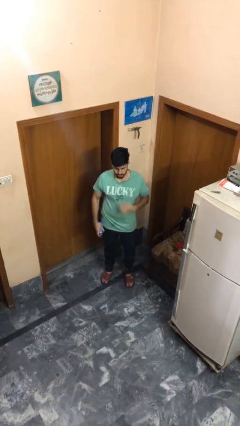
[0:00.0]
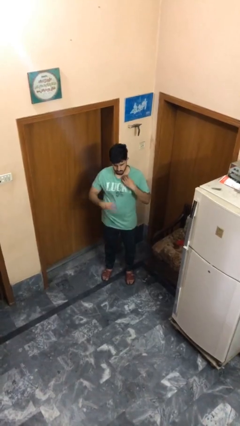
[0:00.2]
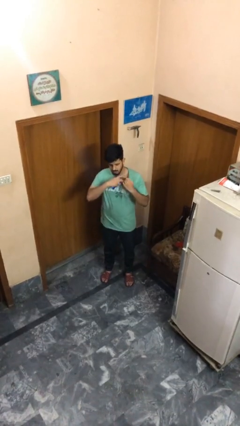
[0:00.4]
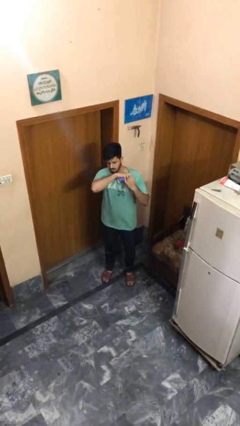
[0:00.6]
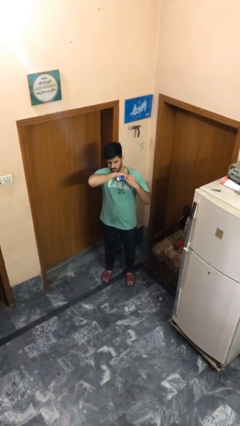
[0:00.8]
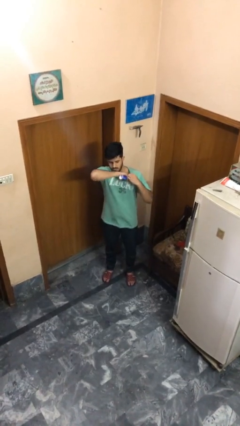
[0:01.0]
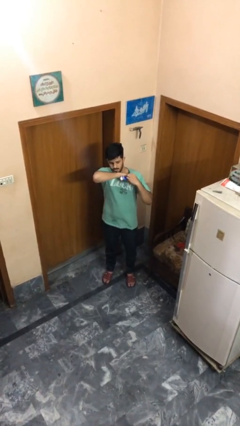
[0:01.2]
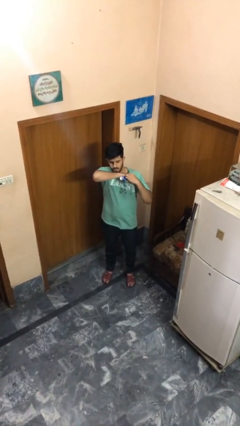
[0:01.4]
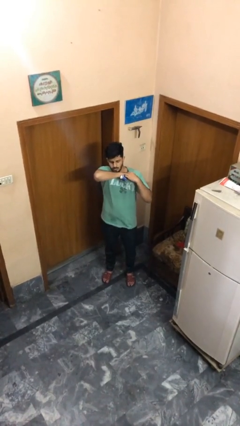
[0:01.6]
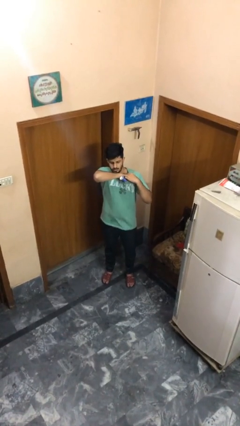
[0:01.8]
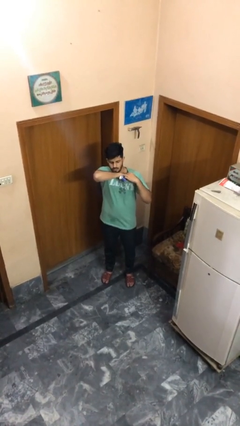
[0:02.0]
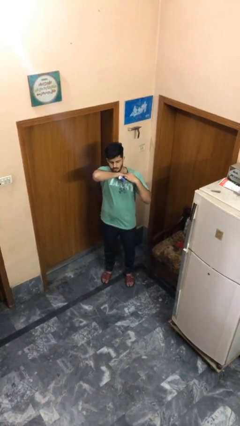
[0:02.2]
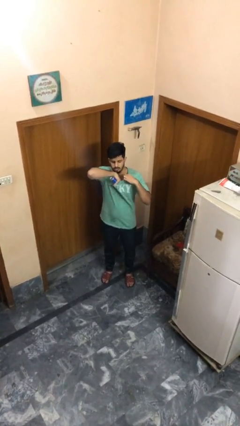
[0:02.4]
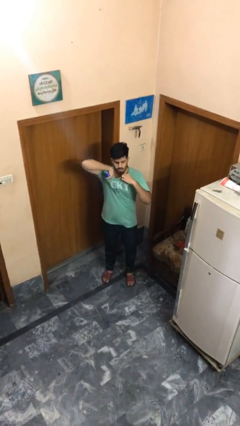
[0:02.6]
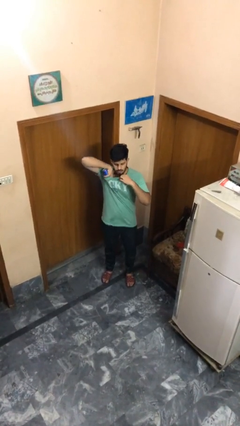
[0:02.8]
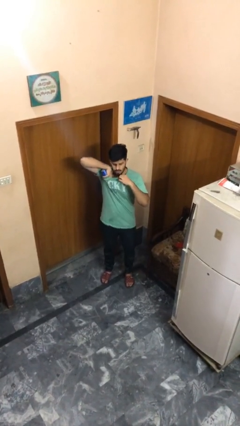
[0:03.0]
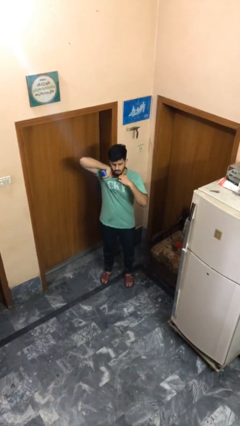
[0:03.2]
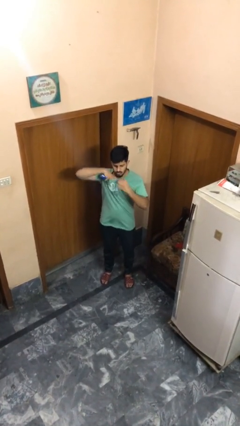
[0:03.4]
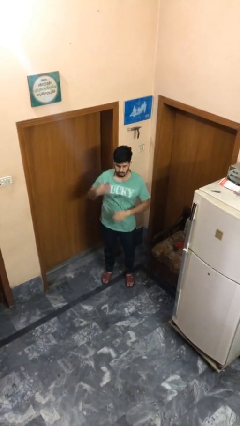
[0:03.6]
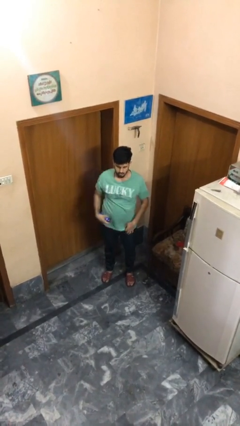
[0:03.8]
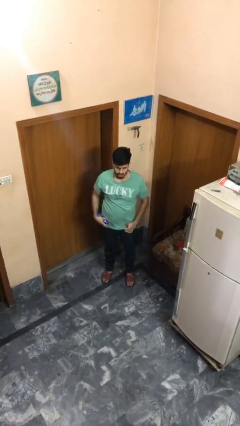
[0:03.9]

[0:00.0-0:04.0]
person applies deodorant

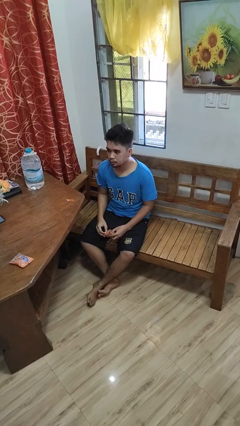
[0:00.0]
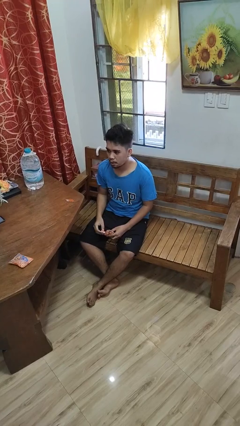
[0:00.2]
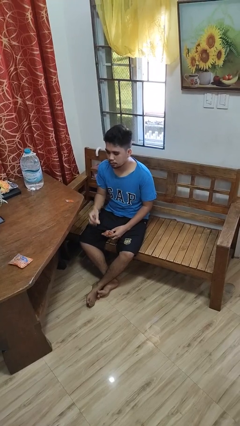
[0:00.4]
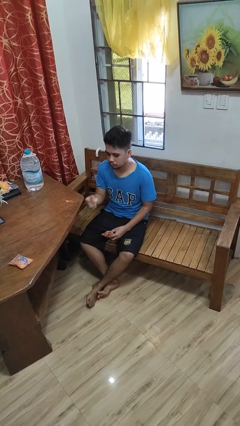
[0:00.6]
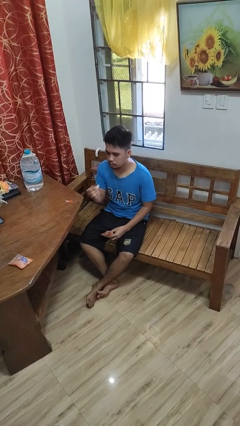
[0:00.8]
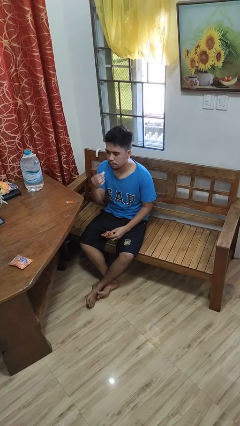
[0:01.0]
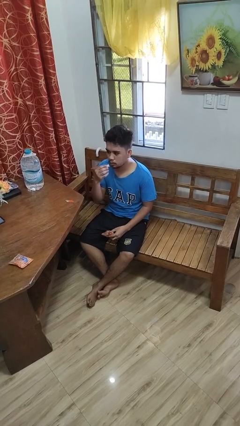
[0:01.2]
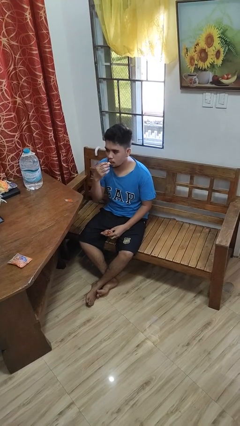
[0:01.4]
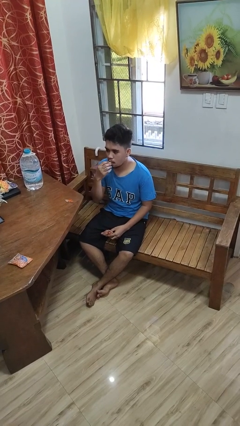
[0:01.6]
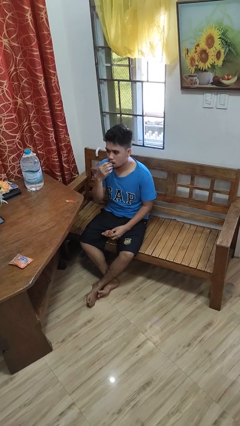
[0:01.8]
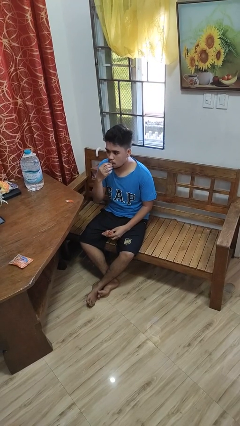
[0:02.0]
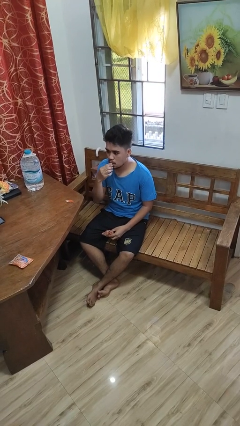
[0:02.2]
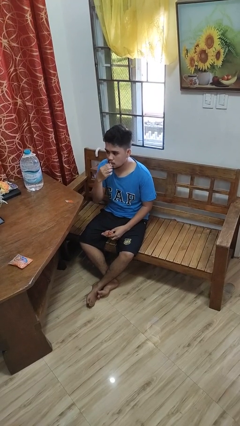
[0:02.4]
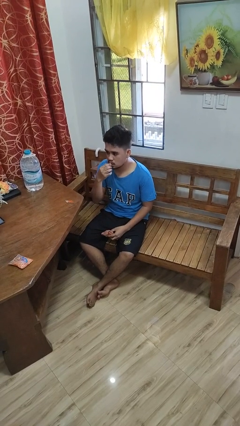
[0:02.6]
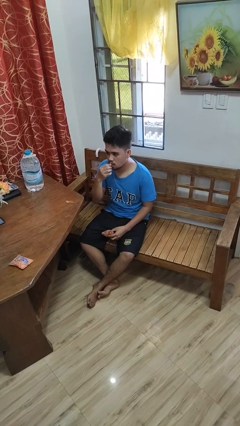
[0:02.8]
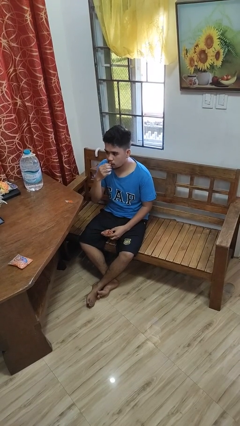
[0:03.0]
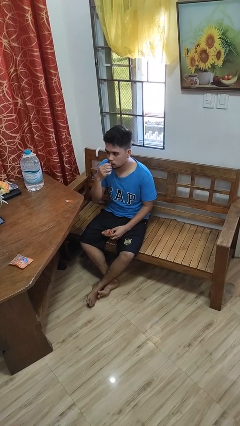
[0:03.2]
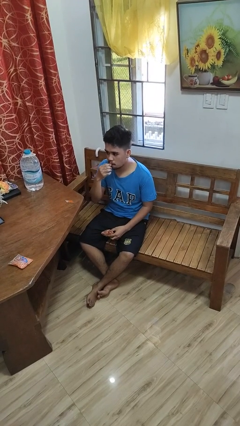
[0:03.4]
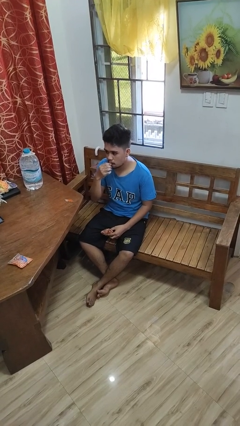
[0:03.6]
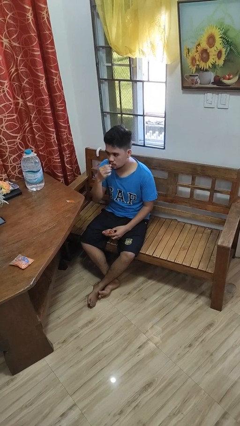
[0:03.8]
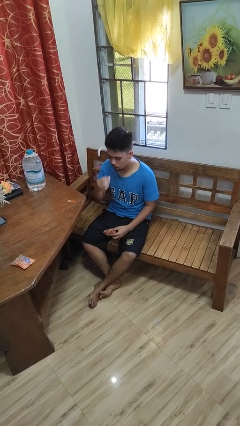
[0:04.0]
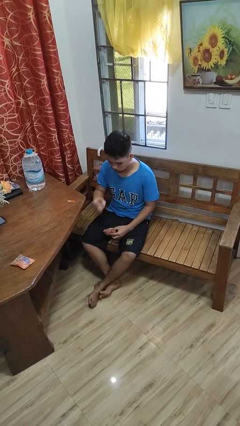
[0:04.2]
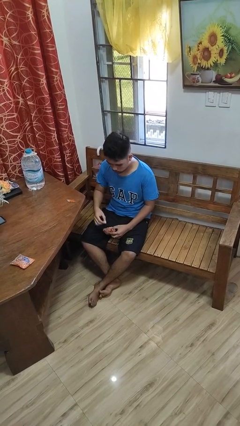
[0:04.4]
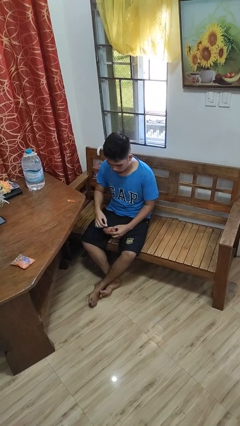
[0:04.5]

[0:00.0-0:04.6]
person eats snack from bag

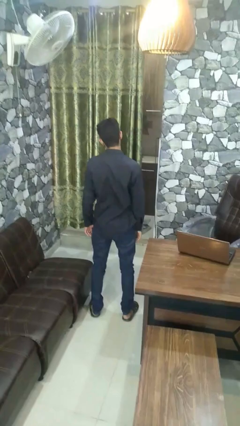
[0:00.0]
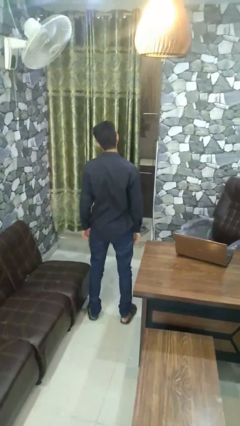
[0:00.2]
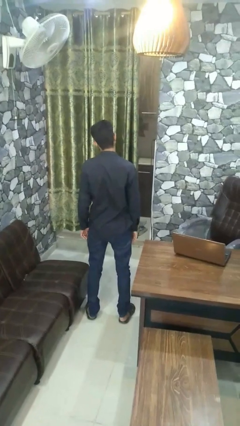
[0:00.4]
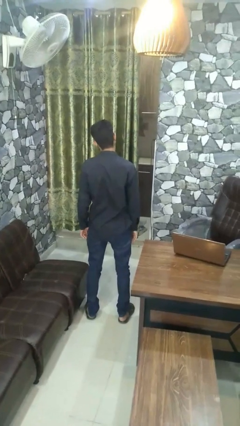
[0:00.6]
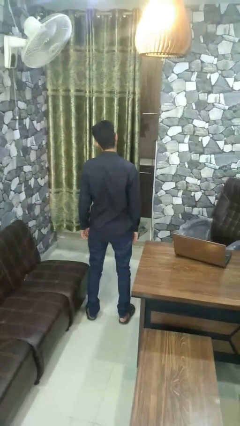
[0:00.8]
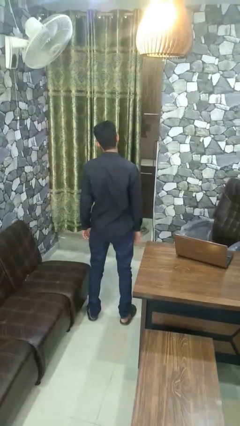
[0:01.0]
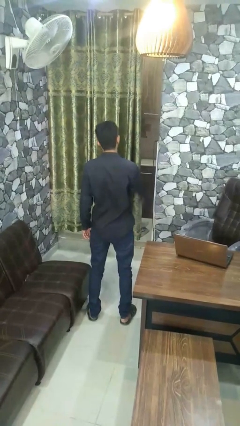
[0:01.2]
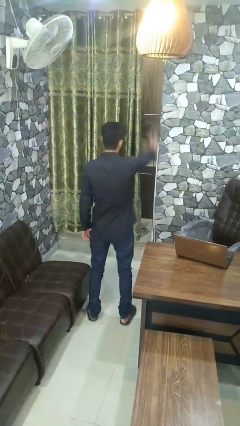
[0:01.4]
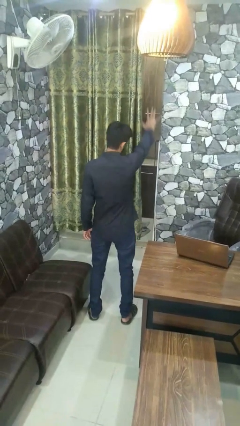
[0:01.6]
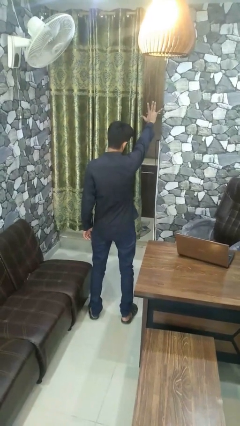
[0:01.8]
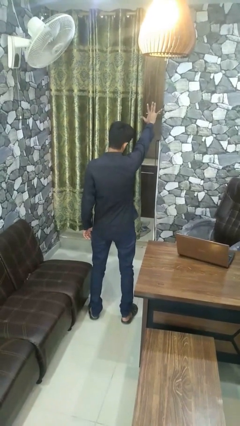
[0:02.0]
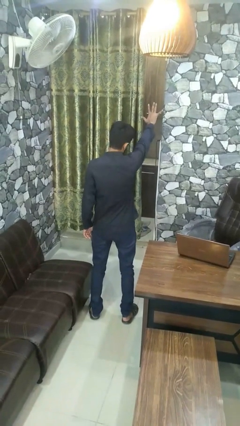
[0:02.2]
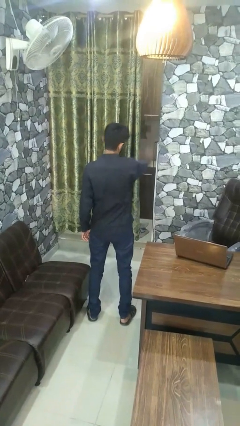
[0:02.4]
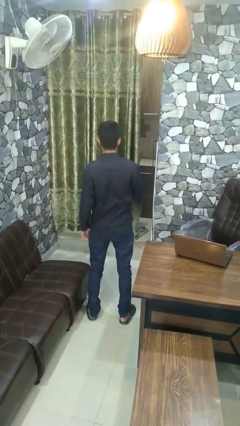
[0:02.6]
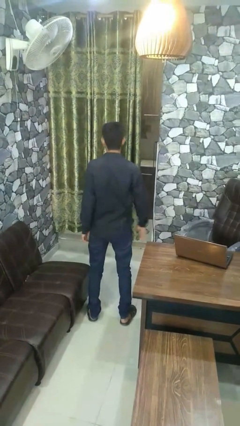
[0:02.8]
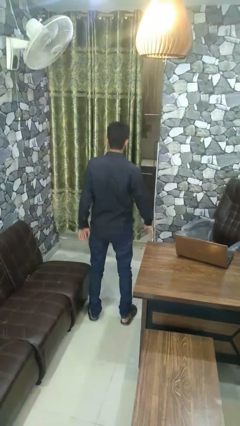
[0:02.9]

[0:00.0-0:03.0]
person gestures number five

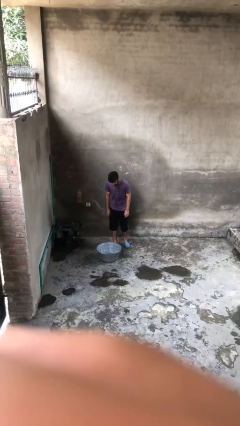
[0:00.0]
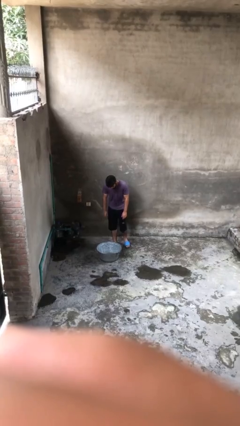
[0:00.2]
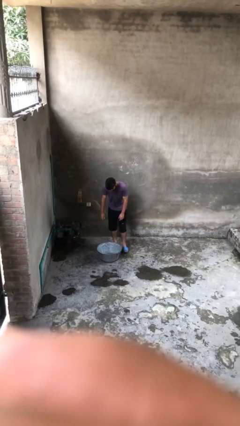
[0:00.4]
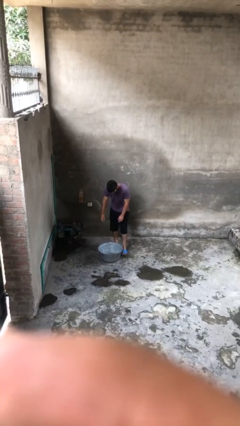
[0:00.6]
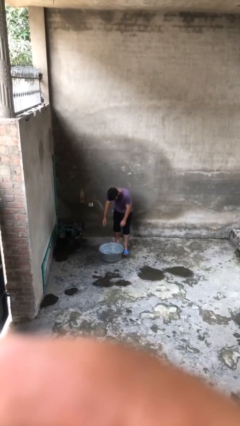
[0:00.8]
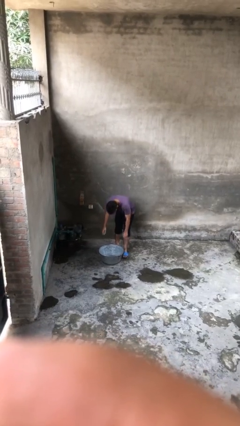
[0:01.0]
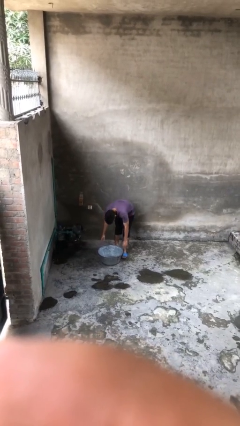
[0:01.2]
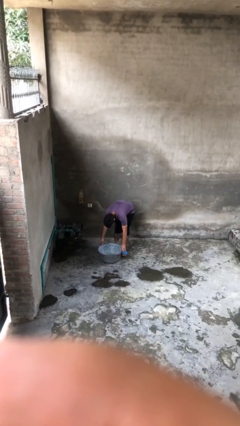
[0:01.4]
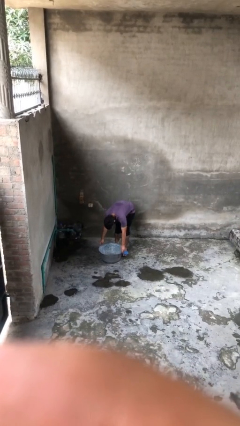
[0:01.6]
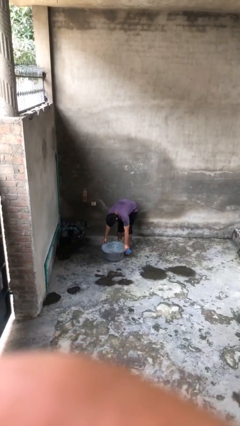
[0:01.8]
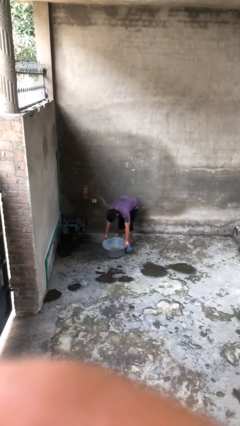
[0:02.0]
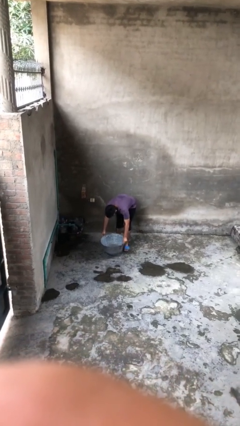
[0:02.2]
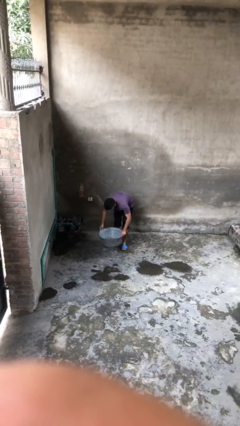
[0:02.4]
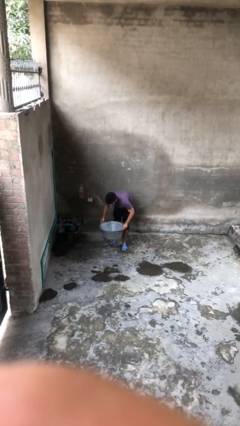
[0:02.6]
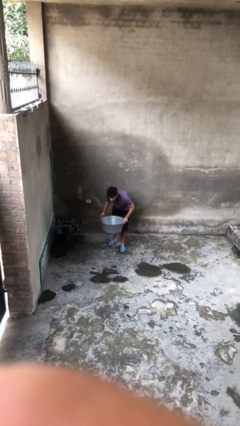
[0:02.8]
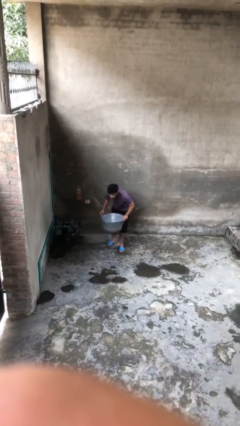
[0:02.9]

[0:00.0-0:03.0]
person picks up object from floor

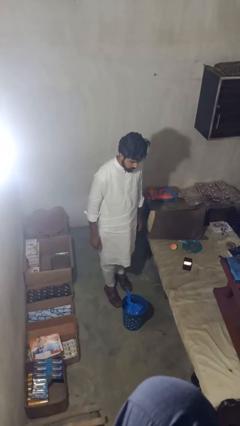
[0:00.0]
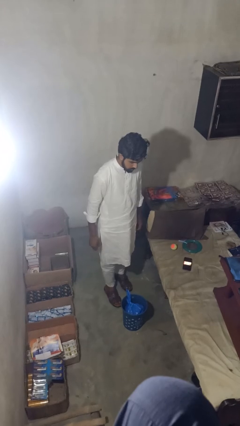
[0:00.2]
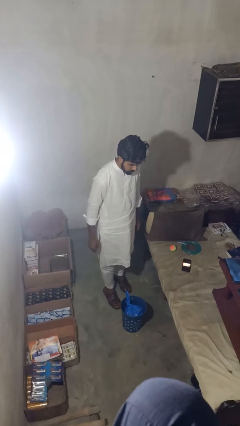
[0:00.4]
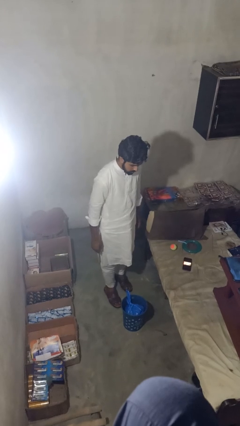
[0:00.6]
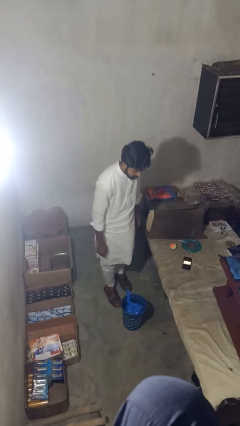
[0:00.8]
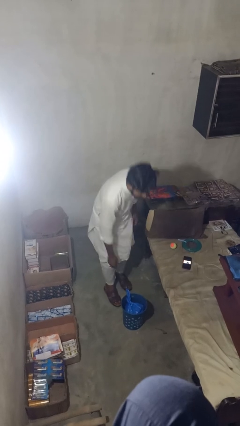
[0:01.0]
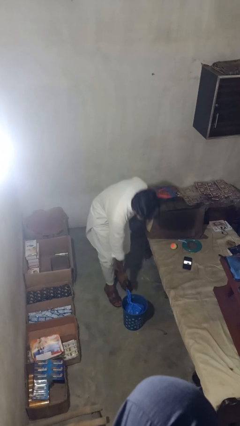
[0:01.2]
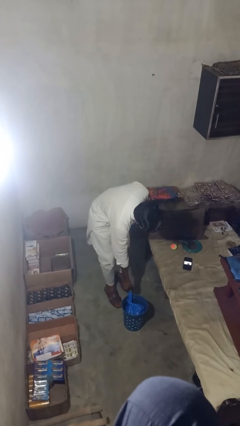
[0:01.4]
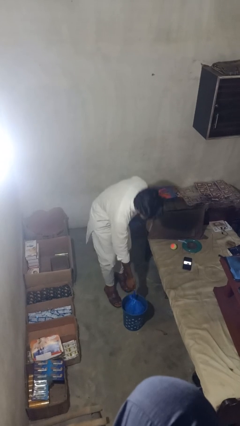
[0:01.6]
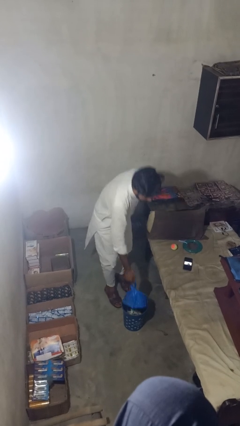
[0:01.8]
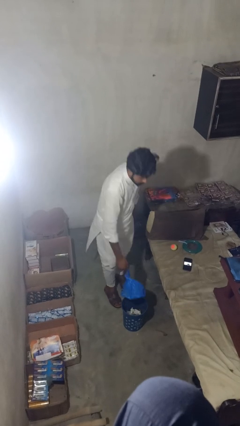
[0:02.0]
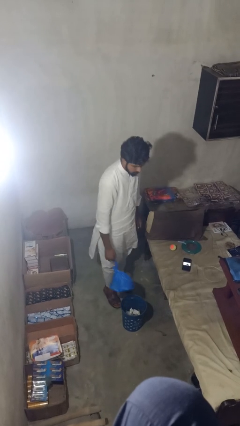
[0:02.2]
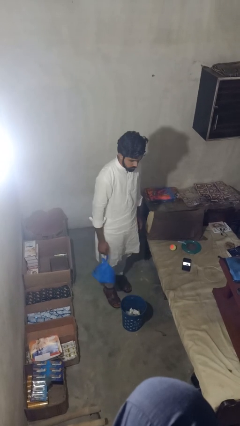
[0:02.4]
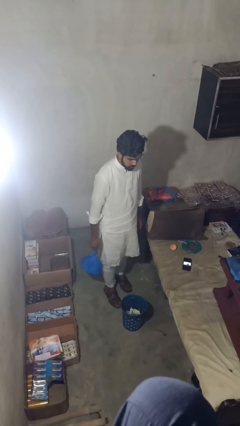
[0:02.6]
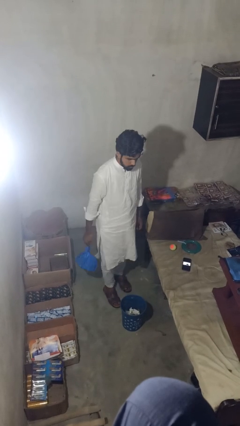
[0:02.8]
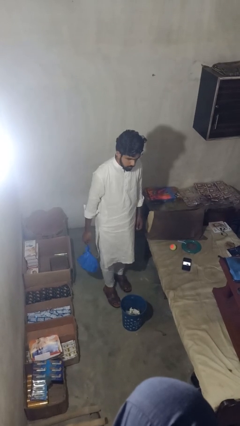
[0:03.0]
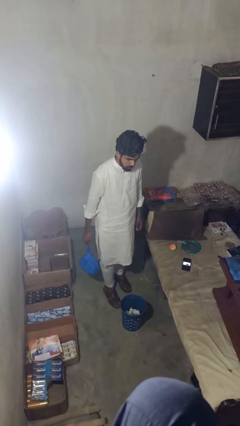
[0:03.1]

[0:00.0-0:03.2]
person takes object from basket
